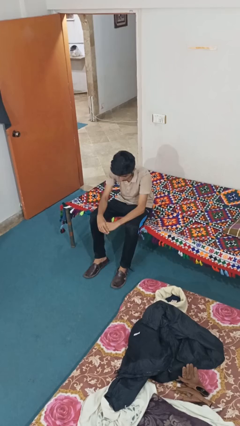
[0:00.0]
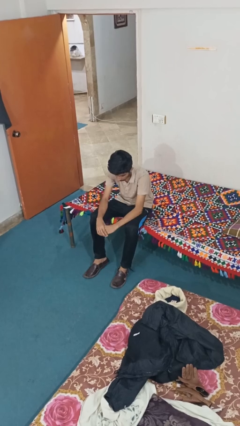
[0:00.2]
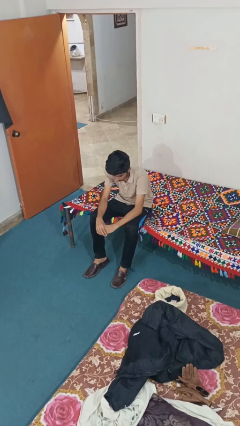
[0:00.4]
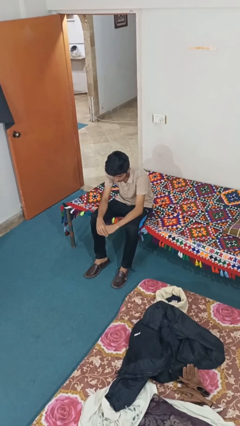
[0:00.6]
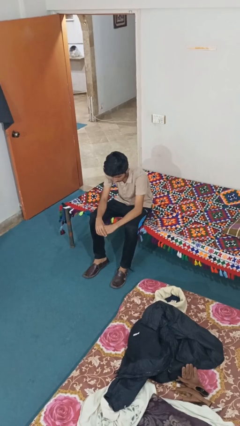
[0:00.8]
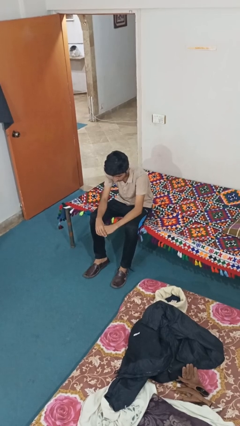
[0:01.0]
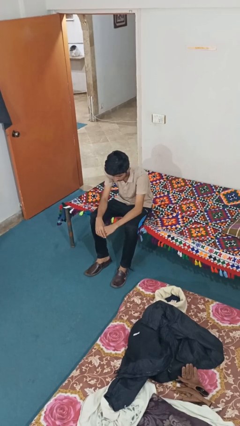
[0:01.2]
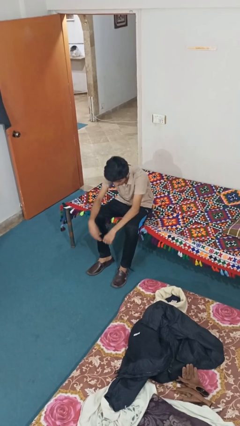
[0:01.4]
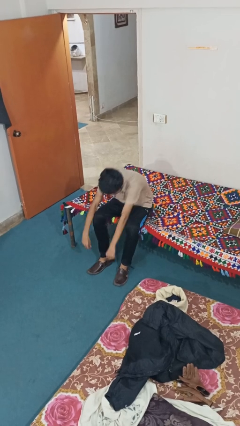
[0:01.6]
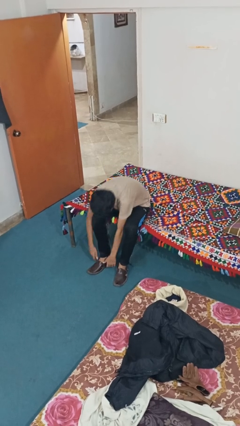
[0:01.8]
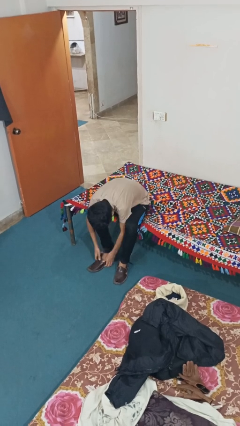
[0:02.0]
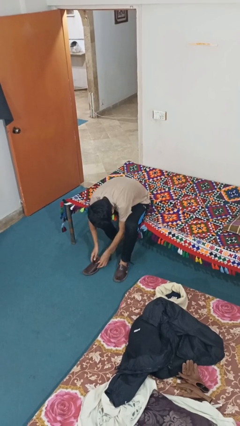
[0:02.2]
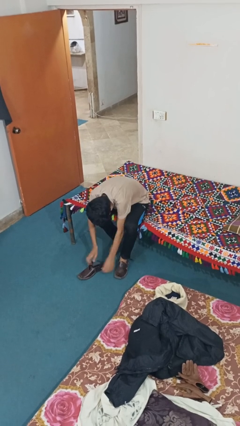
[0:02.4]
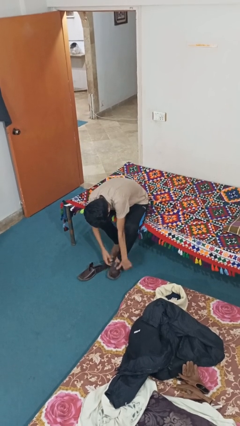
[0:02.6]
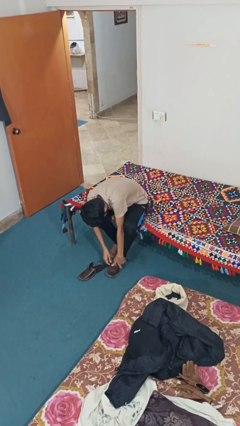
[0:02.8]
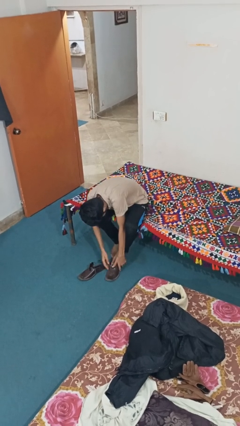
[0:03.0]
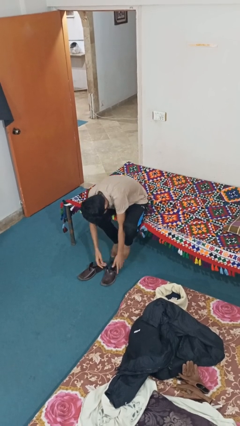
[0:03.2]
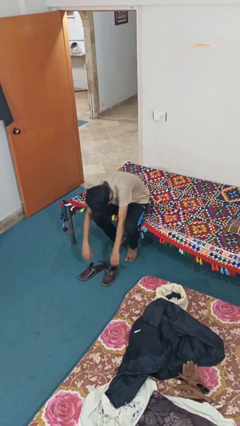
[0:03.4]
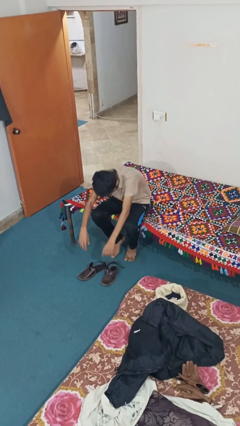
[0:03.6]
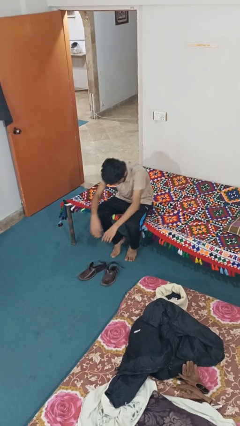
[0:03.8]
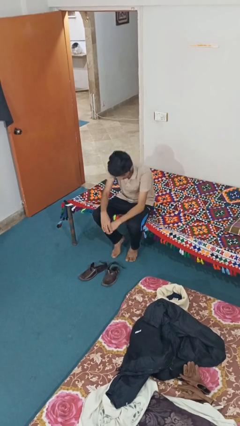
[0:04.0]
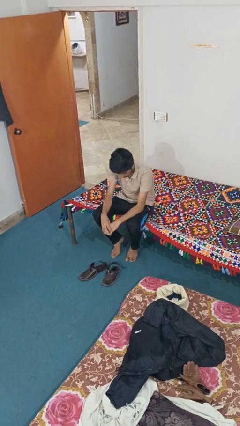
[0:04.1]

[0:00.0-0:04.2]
person takes off shoes

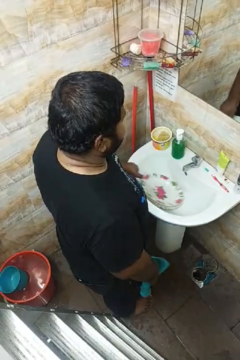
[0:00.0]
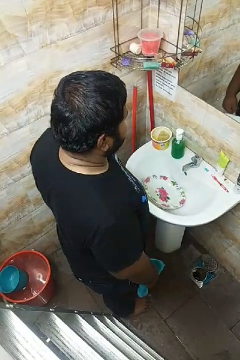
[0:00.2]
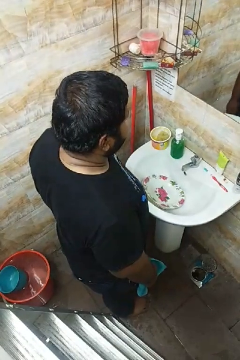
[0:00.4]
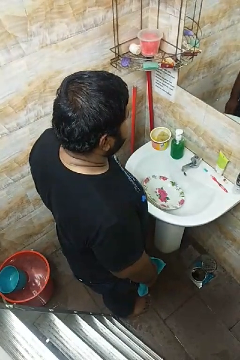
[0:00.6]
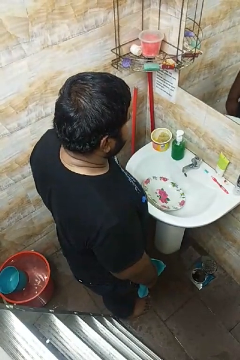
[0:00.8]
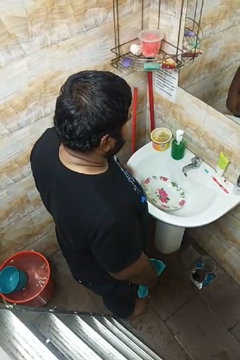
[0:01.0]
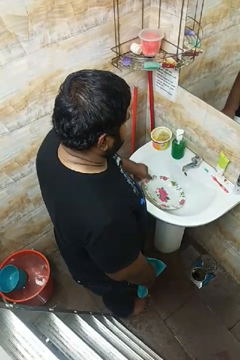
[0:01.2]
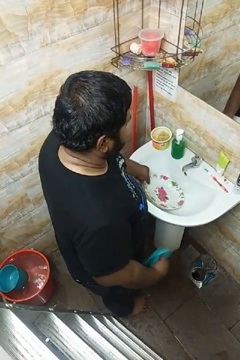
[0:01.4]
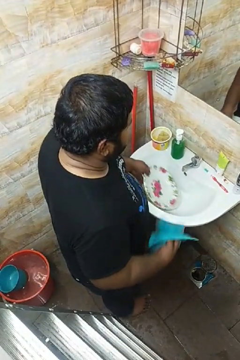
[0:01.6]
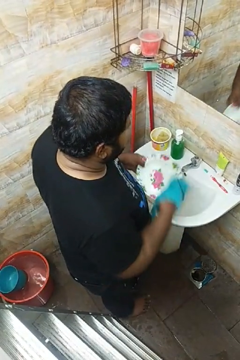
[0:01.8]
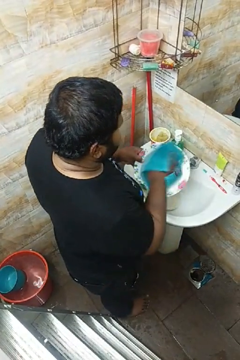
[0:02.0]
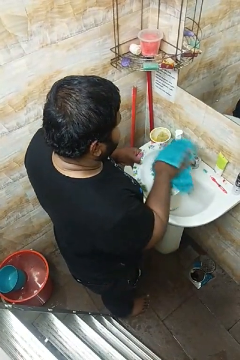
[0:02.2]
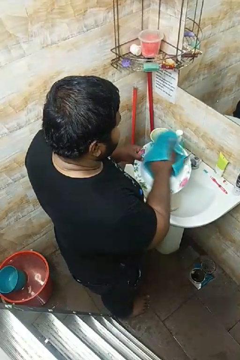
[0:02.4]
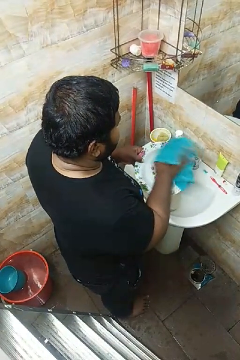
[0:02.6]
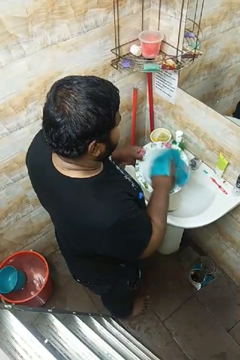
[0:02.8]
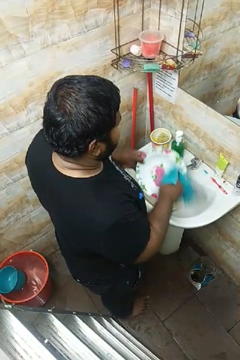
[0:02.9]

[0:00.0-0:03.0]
person dries dish

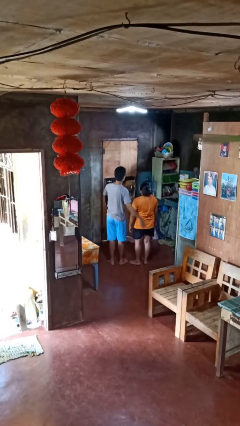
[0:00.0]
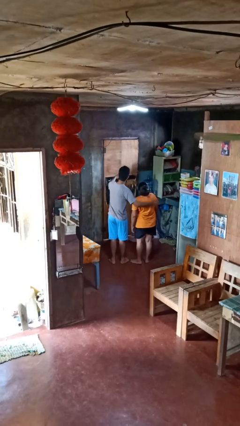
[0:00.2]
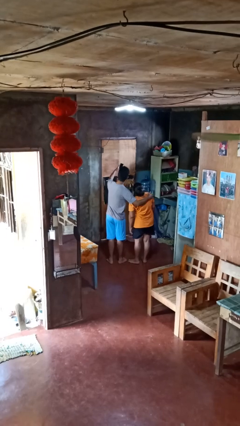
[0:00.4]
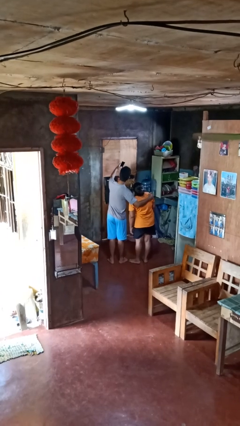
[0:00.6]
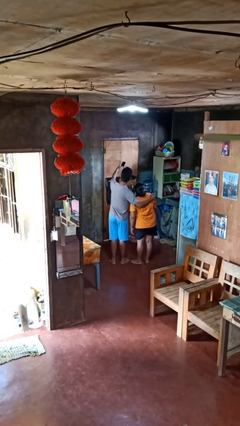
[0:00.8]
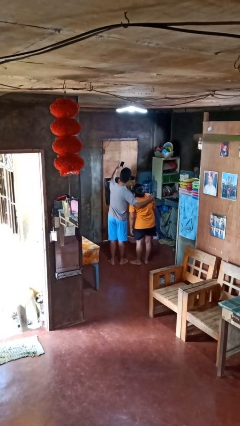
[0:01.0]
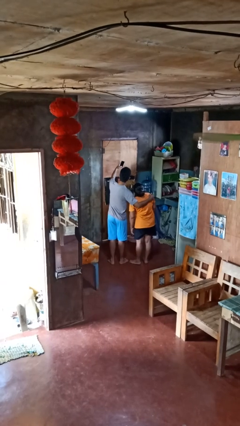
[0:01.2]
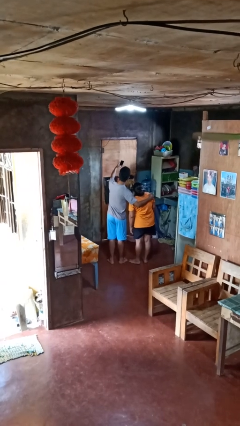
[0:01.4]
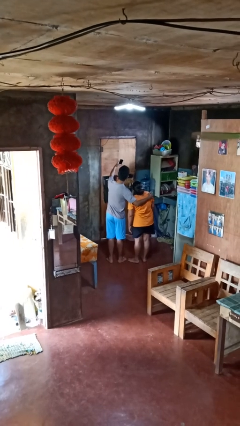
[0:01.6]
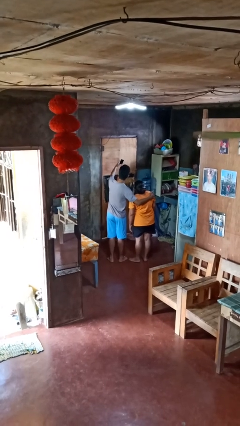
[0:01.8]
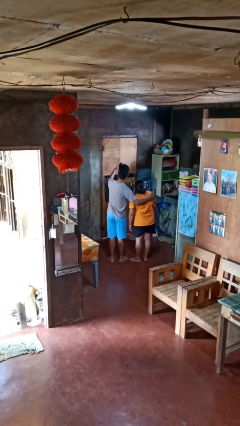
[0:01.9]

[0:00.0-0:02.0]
person takes selfie with person

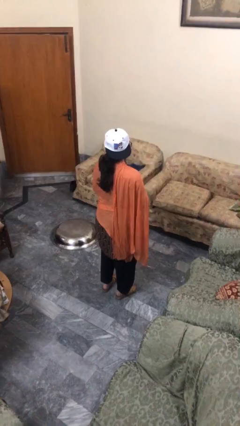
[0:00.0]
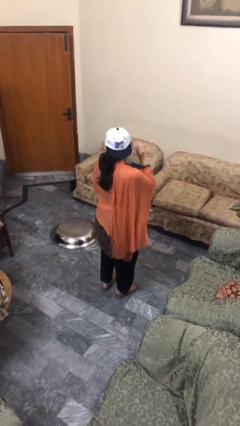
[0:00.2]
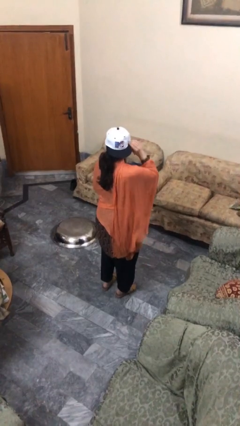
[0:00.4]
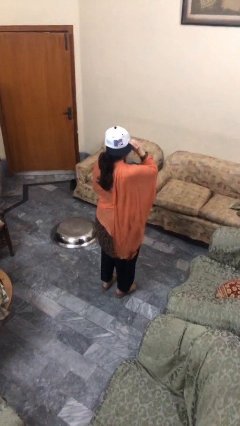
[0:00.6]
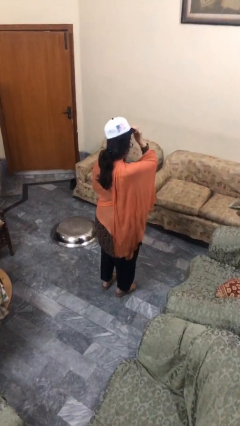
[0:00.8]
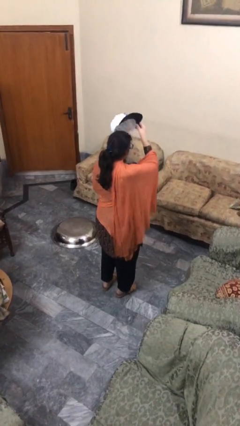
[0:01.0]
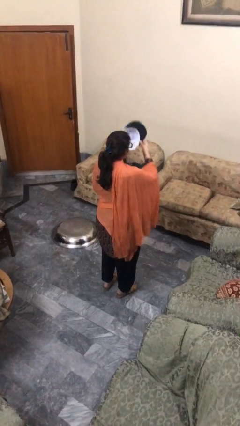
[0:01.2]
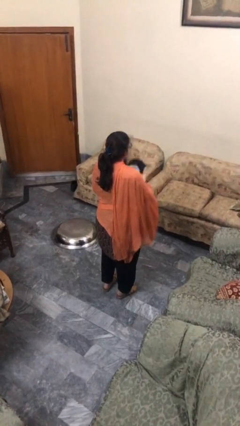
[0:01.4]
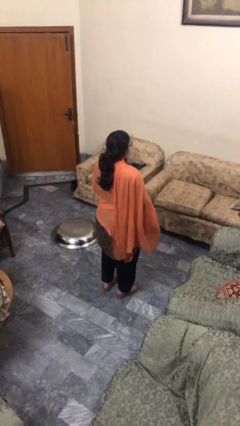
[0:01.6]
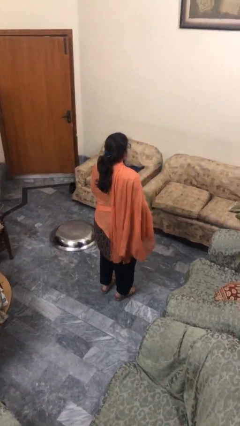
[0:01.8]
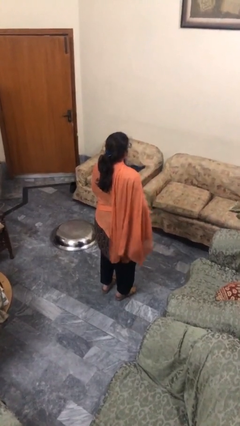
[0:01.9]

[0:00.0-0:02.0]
person takes off hat

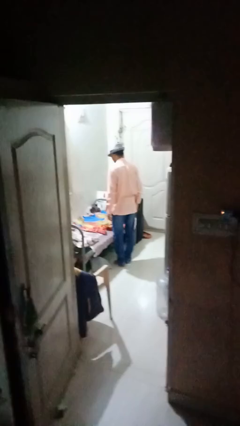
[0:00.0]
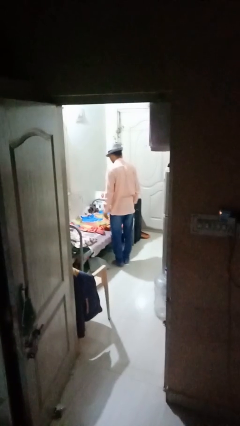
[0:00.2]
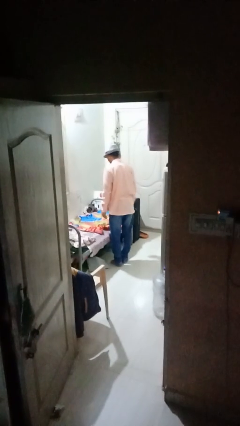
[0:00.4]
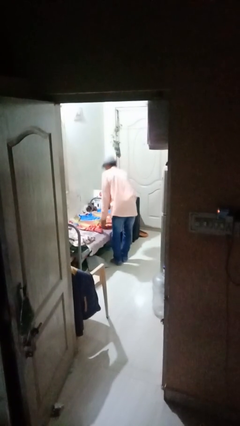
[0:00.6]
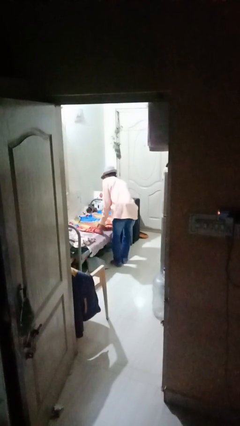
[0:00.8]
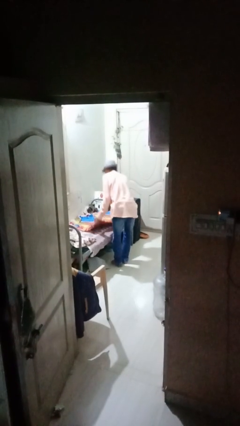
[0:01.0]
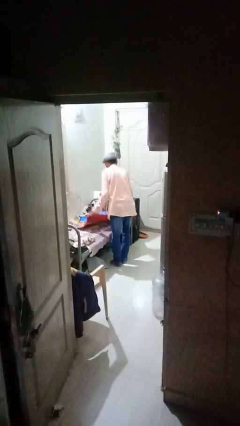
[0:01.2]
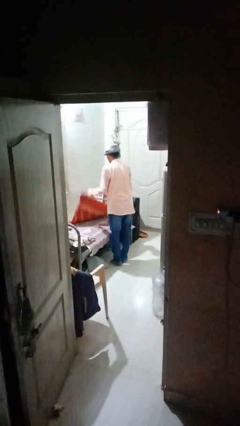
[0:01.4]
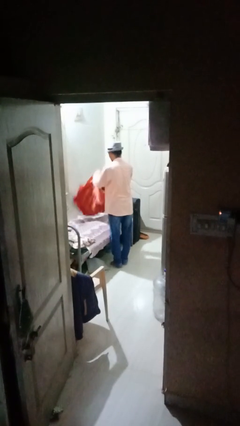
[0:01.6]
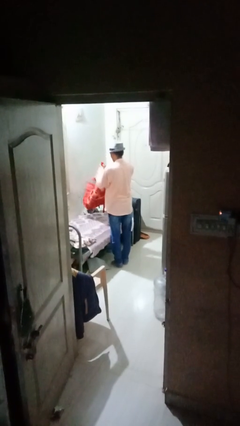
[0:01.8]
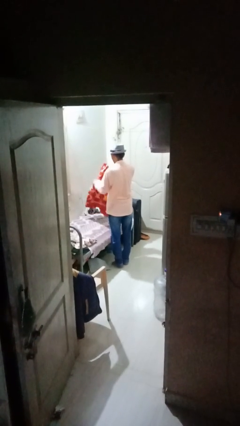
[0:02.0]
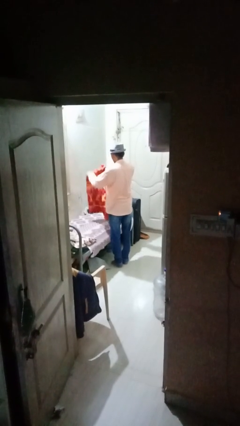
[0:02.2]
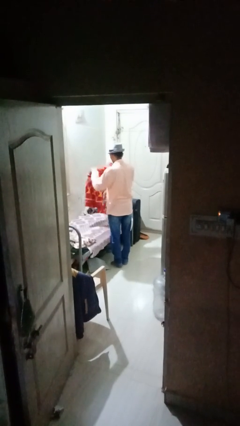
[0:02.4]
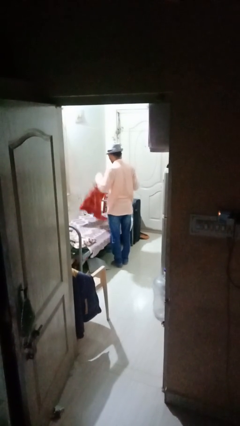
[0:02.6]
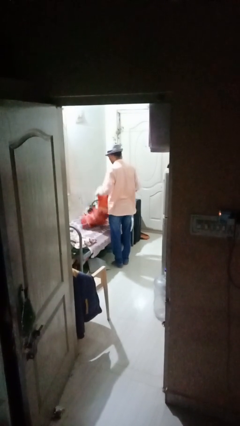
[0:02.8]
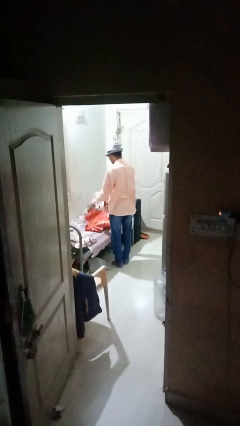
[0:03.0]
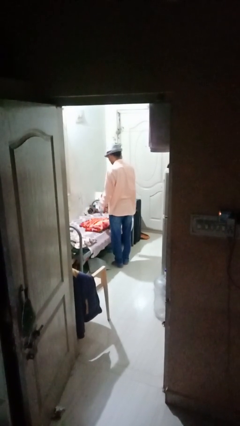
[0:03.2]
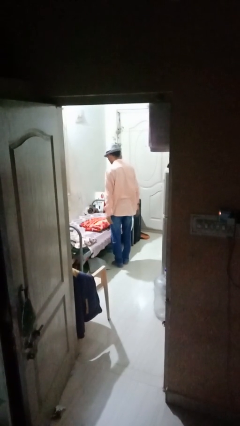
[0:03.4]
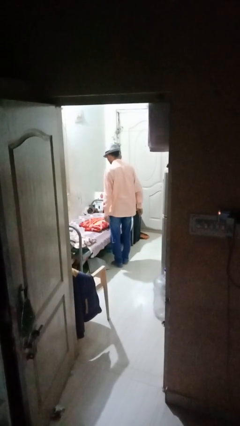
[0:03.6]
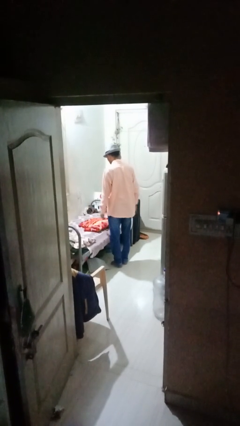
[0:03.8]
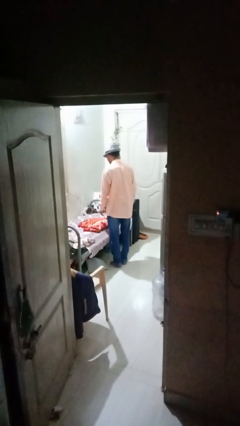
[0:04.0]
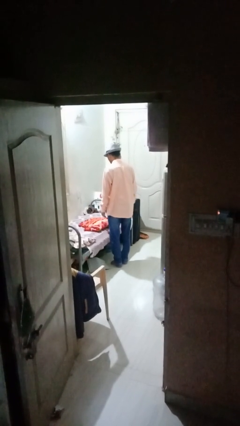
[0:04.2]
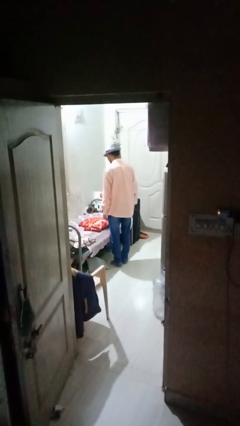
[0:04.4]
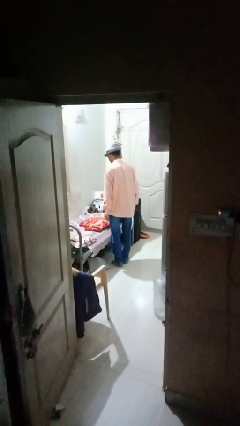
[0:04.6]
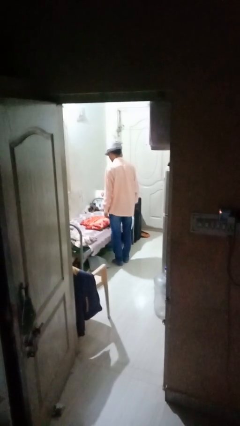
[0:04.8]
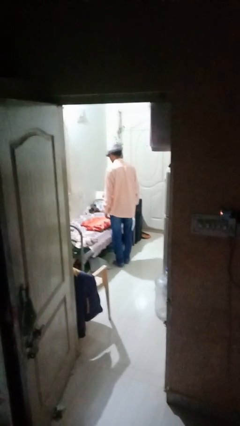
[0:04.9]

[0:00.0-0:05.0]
person folds blanket

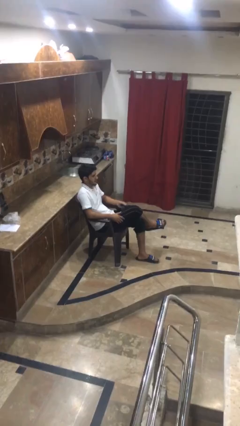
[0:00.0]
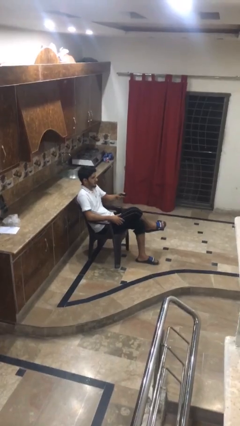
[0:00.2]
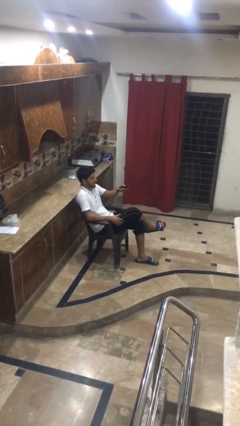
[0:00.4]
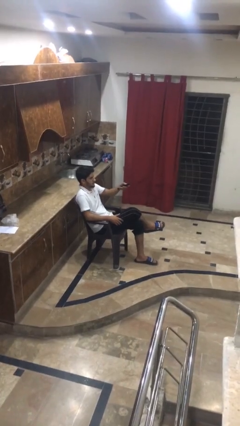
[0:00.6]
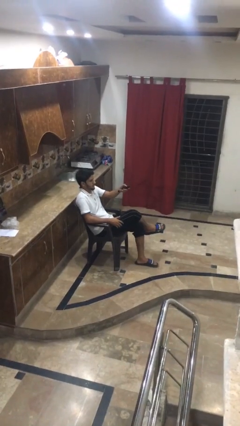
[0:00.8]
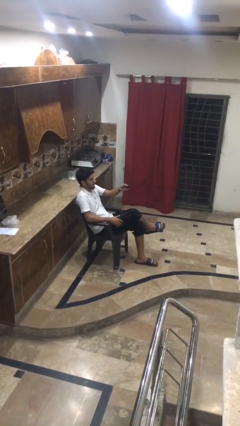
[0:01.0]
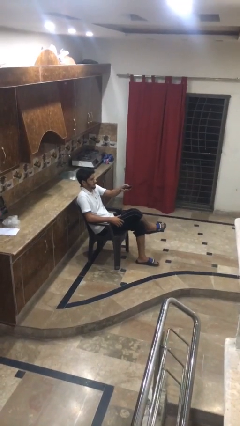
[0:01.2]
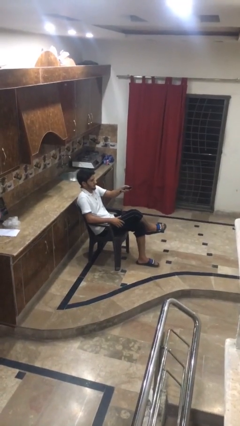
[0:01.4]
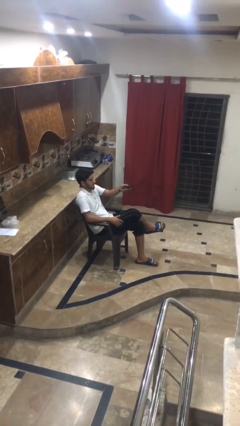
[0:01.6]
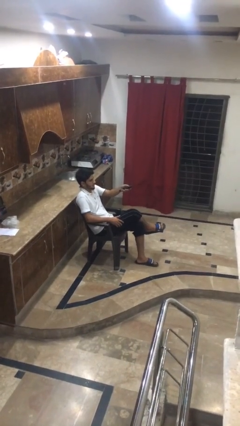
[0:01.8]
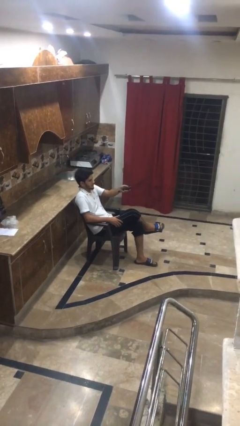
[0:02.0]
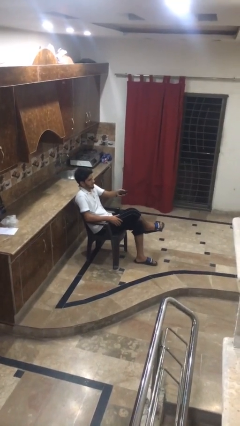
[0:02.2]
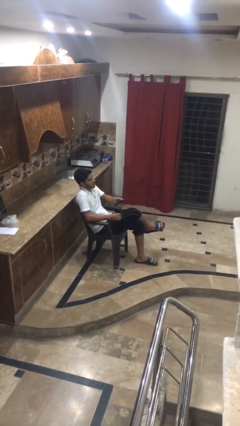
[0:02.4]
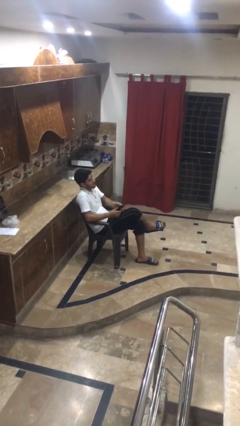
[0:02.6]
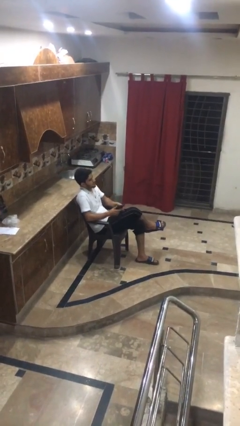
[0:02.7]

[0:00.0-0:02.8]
person uses television remote
